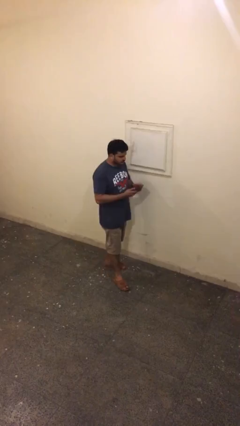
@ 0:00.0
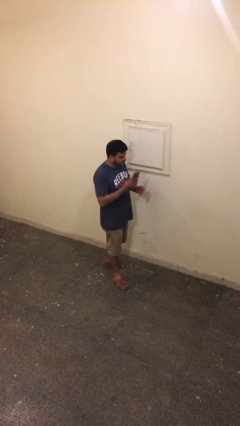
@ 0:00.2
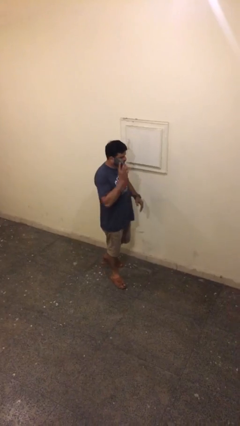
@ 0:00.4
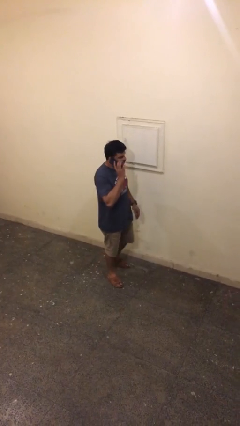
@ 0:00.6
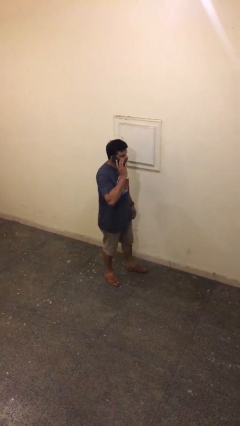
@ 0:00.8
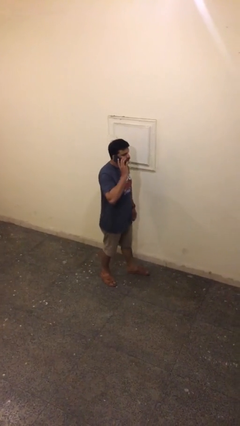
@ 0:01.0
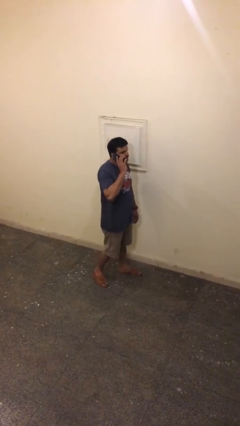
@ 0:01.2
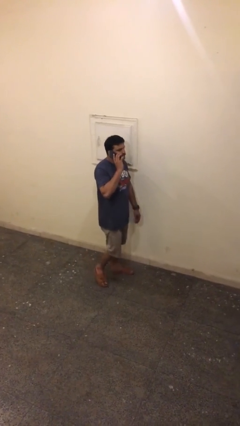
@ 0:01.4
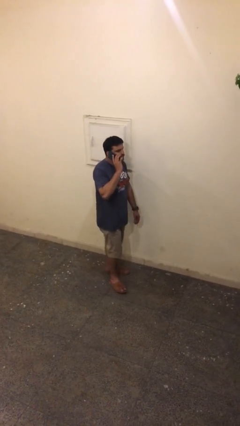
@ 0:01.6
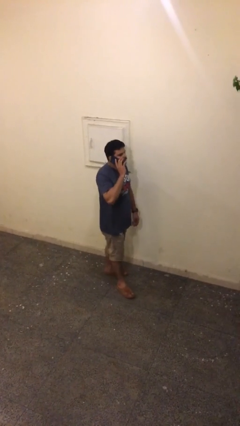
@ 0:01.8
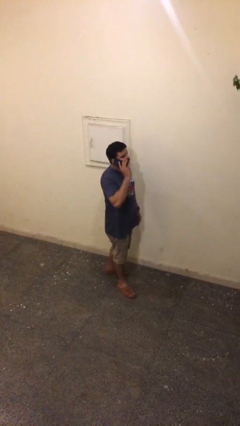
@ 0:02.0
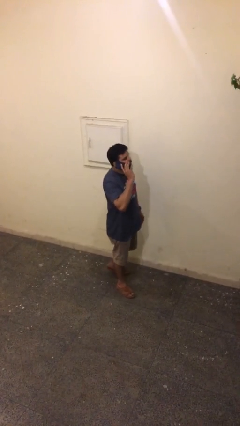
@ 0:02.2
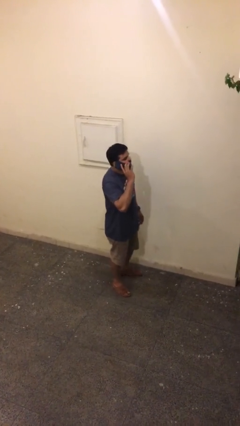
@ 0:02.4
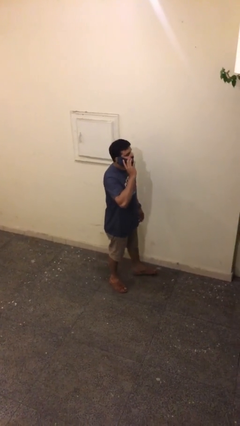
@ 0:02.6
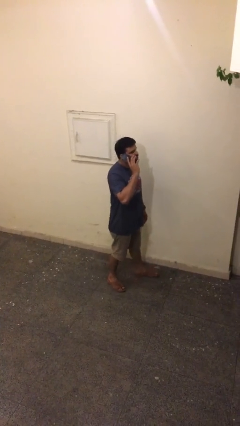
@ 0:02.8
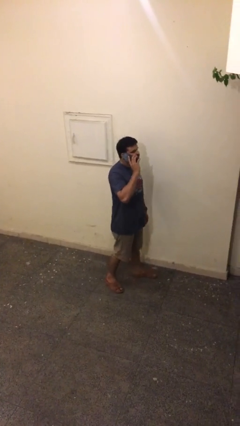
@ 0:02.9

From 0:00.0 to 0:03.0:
person texts on phone

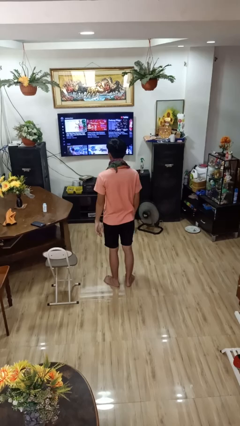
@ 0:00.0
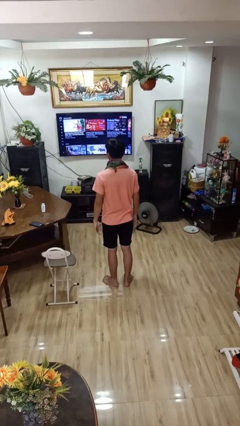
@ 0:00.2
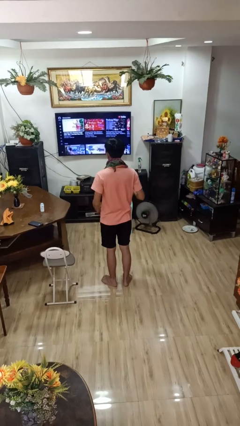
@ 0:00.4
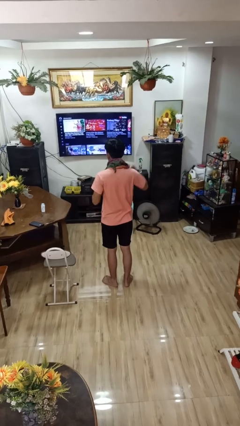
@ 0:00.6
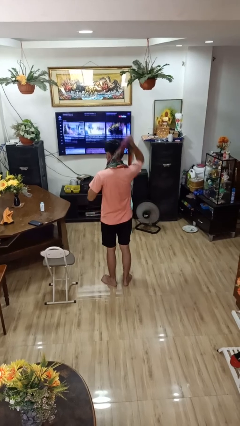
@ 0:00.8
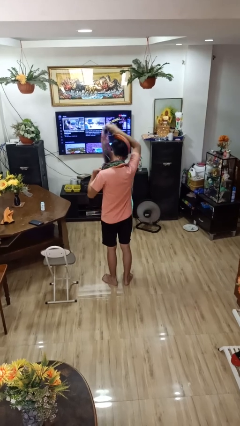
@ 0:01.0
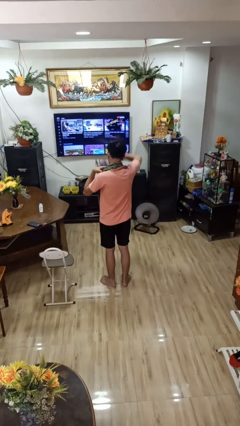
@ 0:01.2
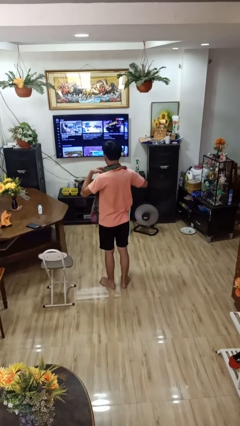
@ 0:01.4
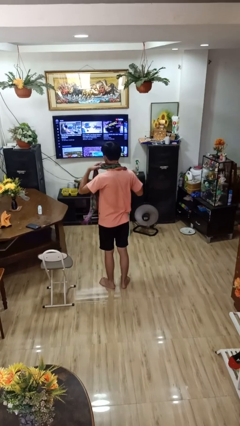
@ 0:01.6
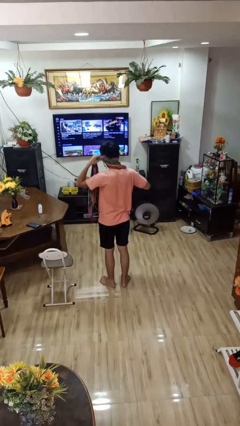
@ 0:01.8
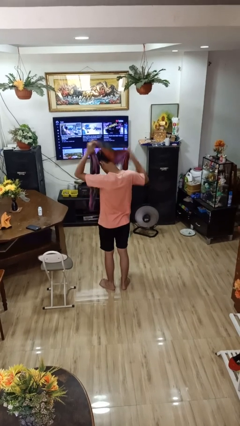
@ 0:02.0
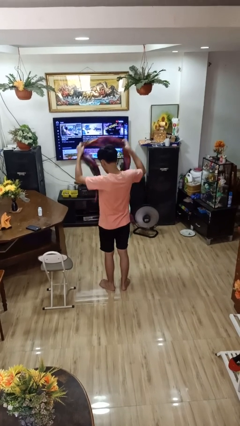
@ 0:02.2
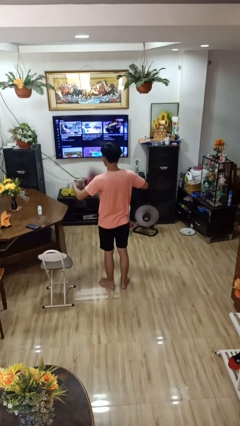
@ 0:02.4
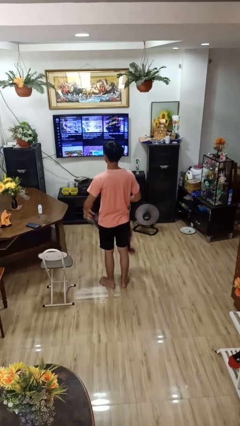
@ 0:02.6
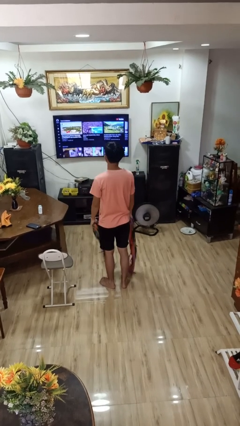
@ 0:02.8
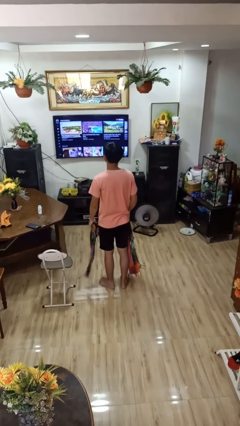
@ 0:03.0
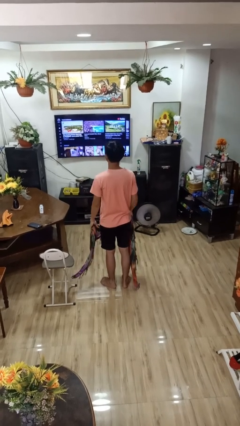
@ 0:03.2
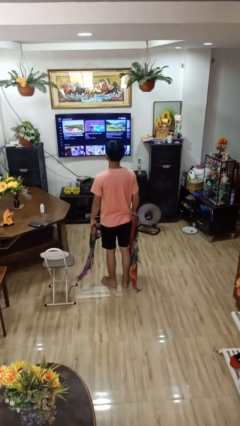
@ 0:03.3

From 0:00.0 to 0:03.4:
person takes off scarf

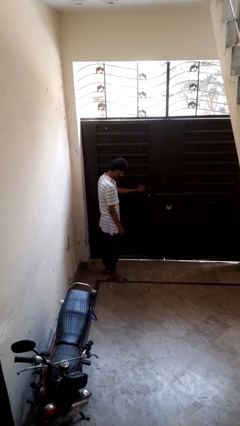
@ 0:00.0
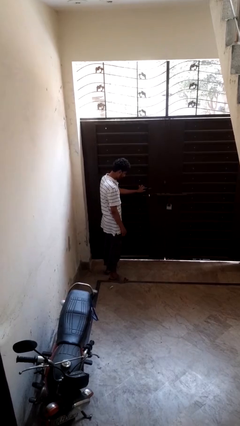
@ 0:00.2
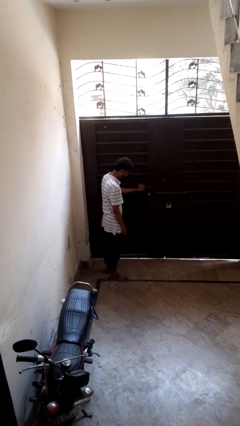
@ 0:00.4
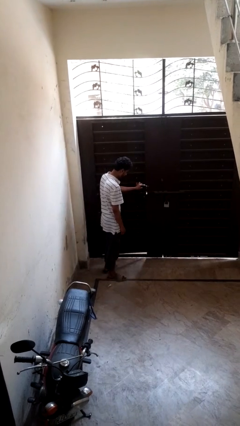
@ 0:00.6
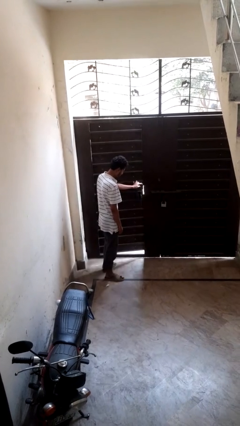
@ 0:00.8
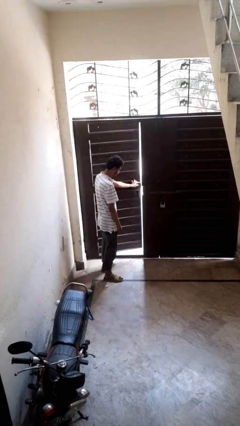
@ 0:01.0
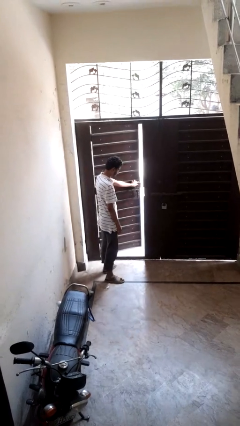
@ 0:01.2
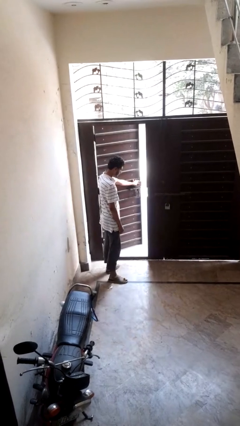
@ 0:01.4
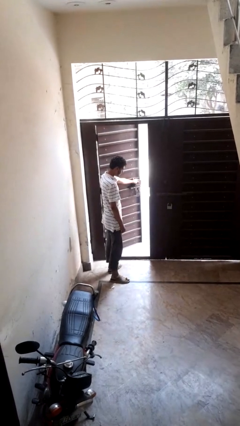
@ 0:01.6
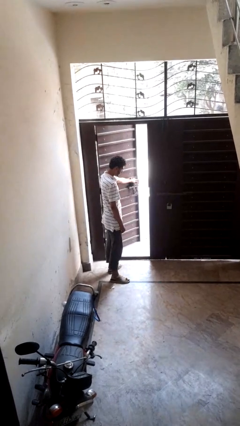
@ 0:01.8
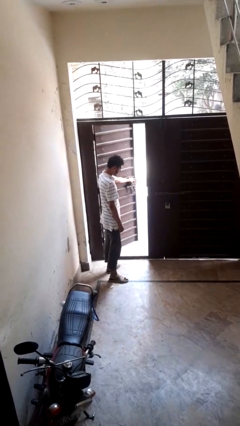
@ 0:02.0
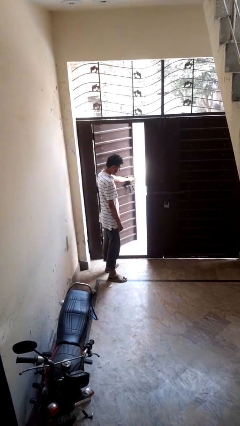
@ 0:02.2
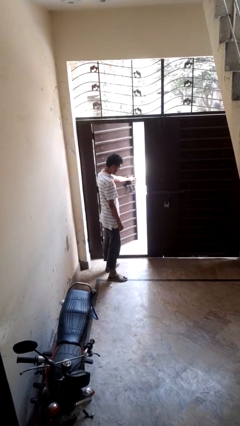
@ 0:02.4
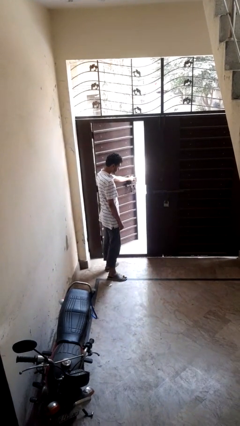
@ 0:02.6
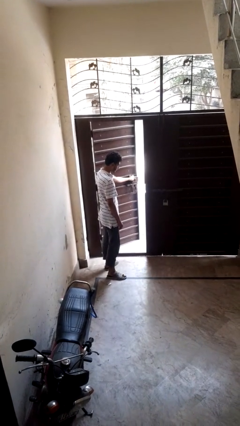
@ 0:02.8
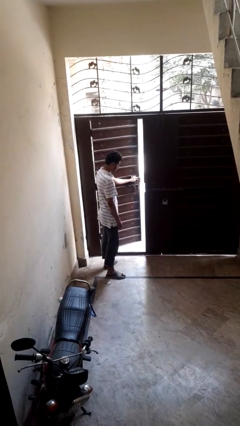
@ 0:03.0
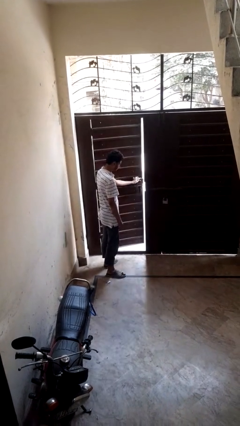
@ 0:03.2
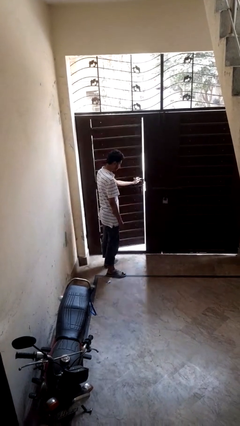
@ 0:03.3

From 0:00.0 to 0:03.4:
person opens facility door

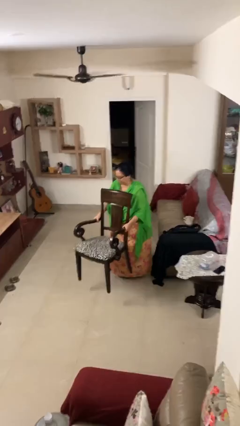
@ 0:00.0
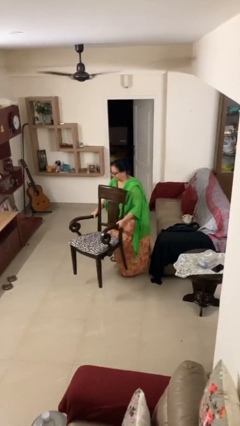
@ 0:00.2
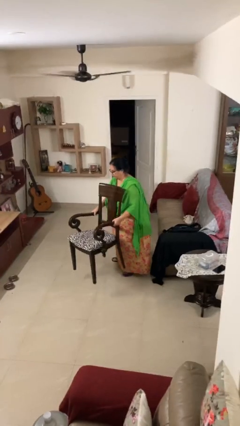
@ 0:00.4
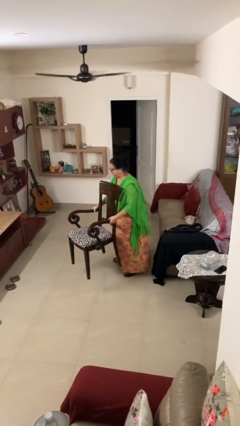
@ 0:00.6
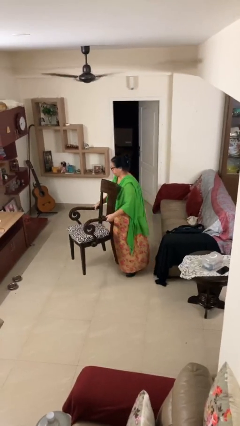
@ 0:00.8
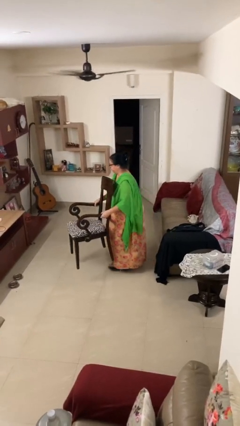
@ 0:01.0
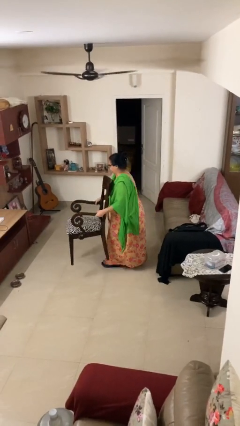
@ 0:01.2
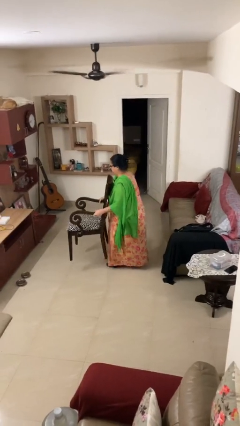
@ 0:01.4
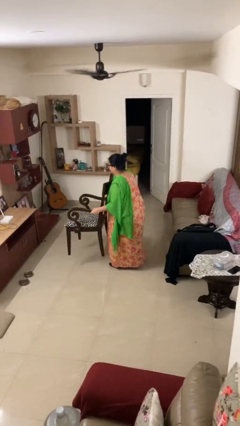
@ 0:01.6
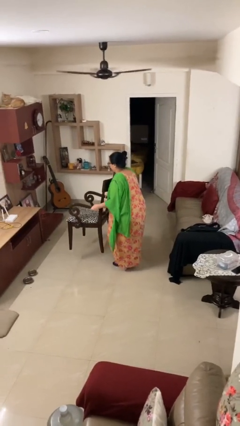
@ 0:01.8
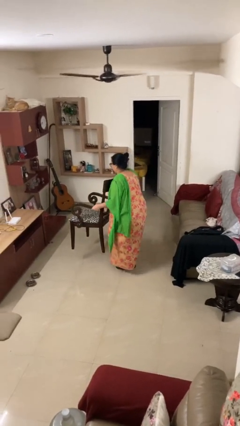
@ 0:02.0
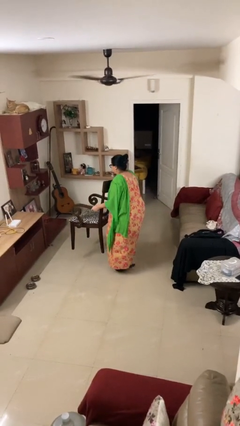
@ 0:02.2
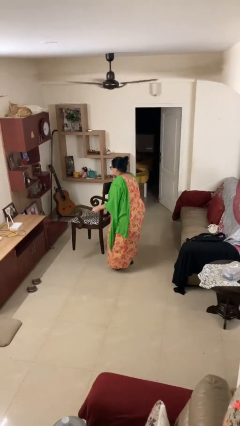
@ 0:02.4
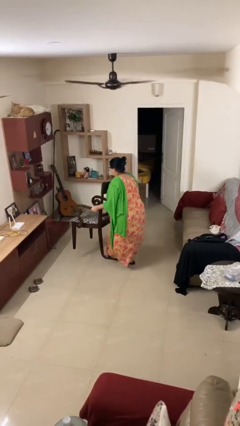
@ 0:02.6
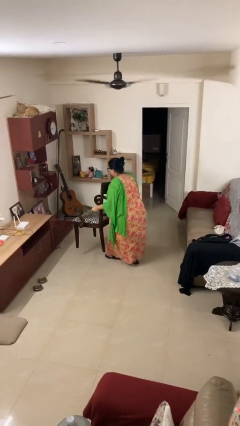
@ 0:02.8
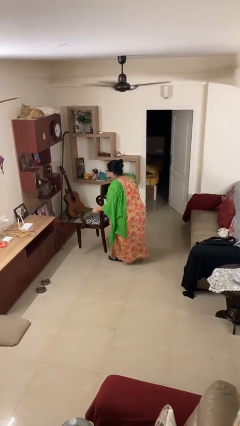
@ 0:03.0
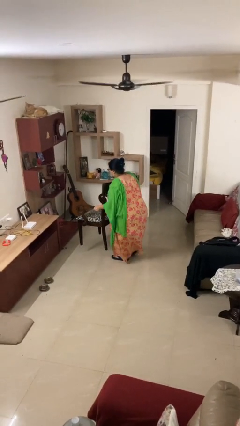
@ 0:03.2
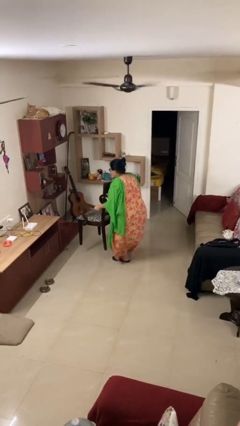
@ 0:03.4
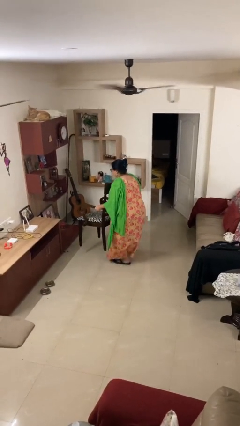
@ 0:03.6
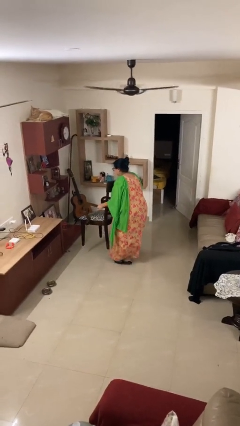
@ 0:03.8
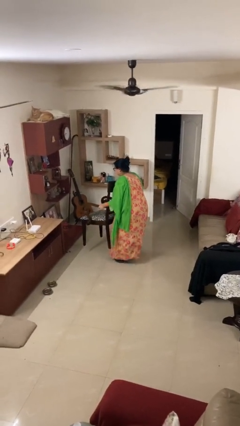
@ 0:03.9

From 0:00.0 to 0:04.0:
person carries heavy object

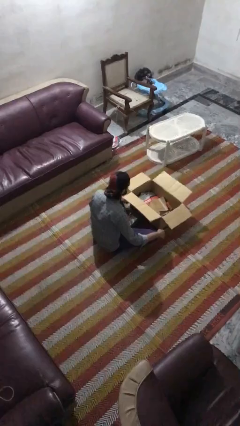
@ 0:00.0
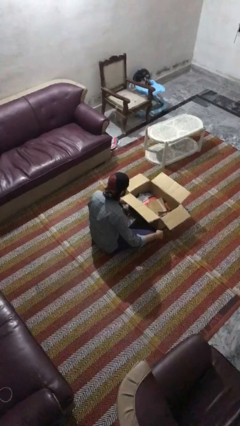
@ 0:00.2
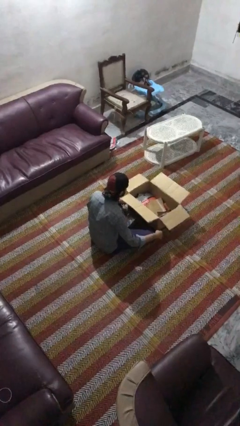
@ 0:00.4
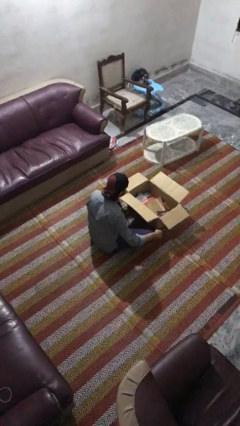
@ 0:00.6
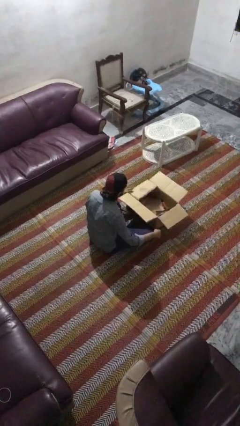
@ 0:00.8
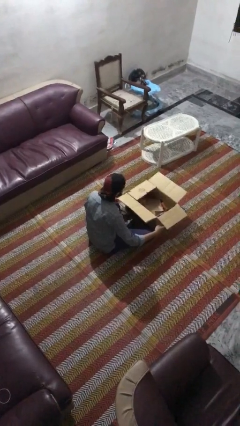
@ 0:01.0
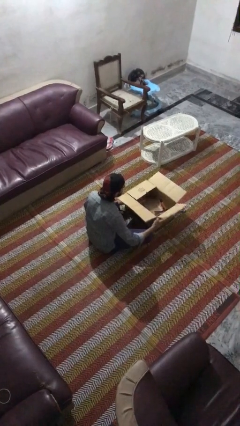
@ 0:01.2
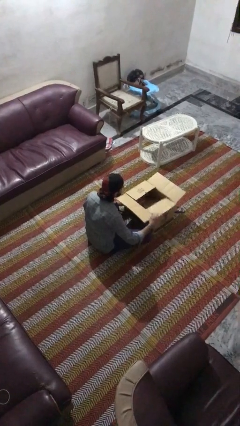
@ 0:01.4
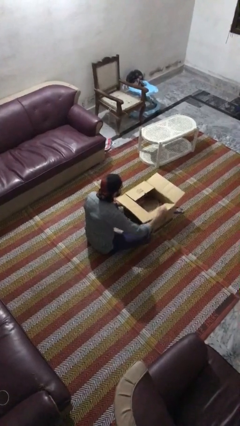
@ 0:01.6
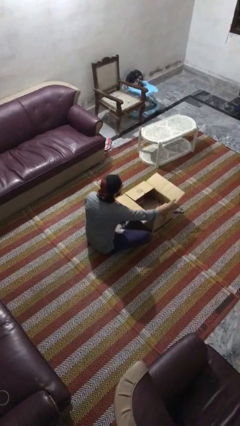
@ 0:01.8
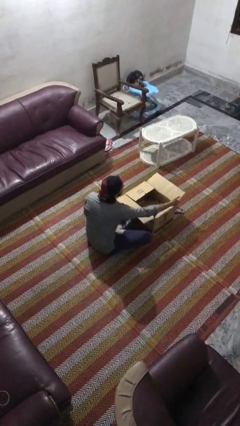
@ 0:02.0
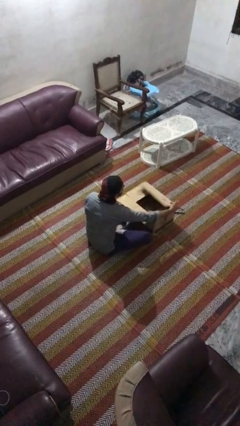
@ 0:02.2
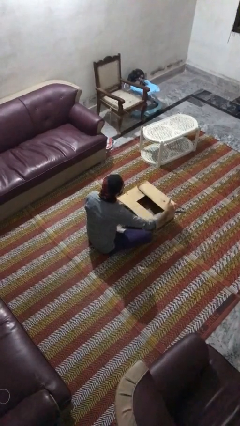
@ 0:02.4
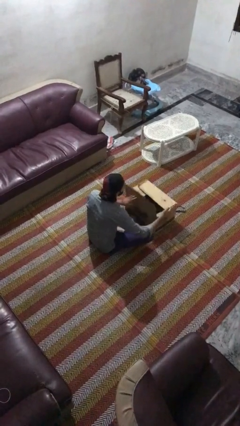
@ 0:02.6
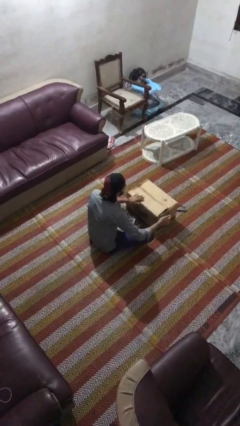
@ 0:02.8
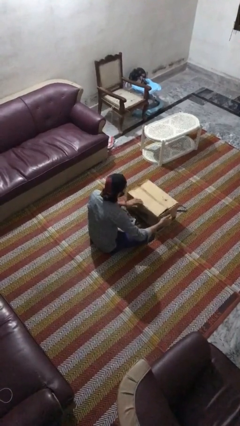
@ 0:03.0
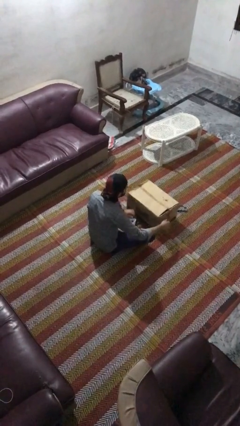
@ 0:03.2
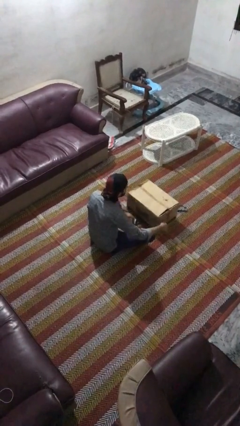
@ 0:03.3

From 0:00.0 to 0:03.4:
person closes box
